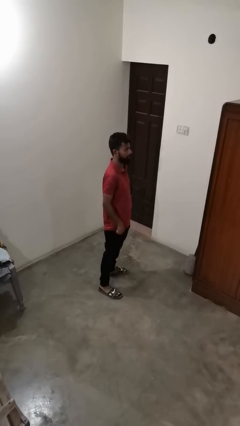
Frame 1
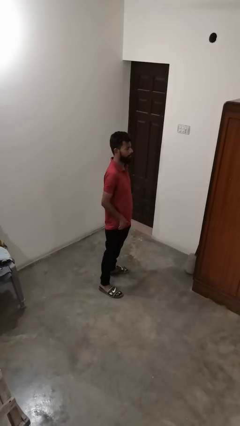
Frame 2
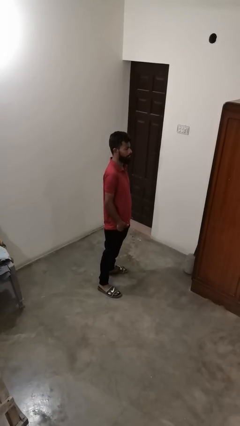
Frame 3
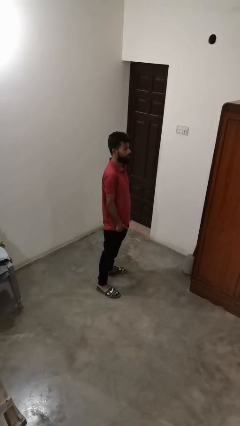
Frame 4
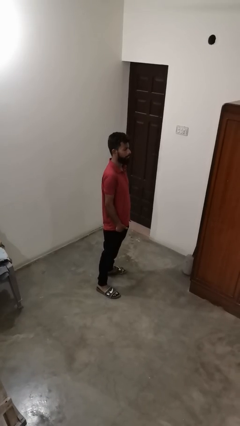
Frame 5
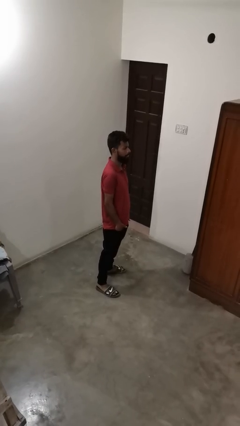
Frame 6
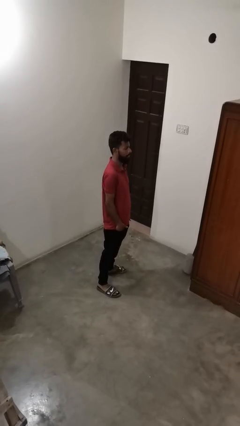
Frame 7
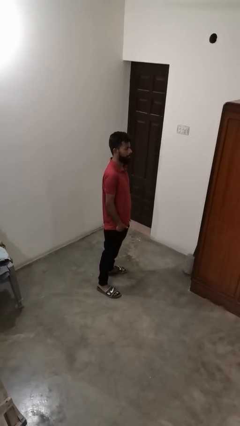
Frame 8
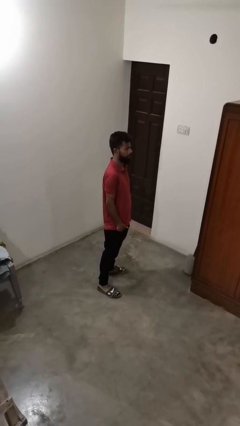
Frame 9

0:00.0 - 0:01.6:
person puts hands in back pockets

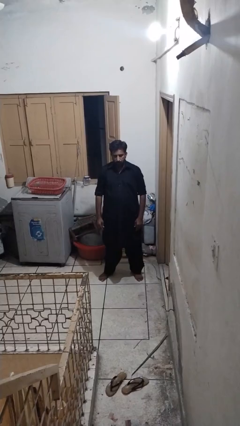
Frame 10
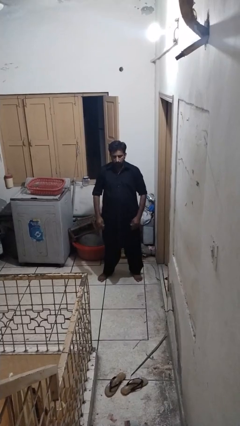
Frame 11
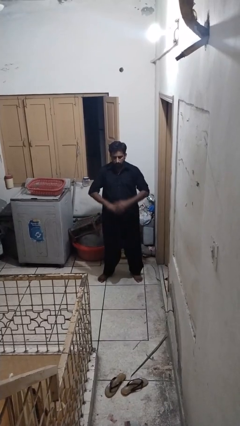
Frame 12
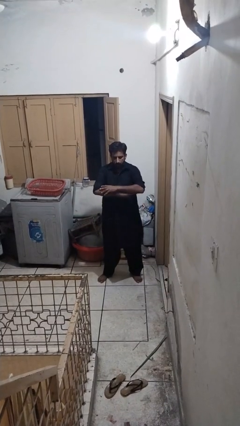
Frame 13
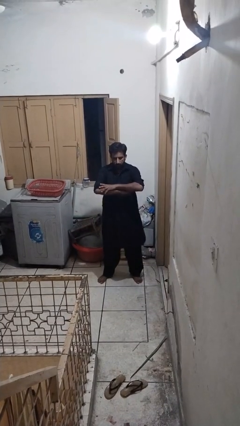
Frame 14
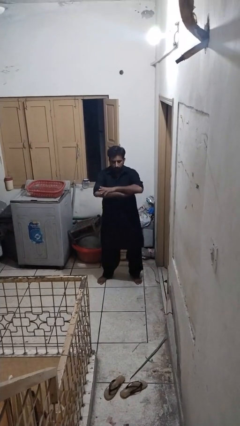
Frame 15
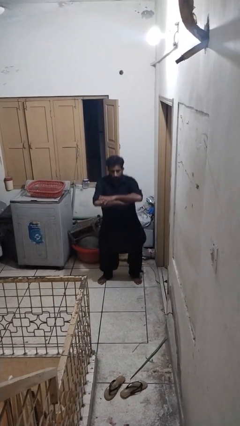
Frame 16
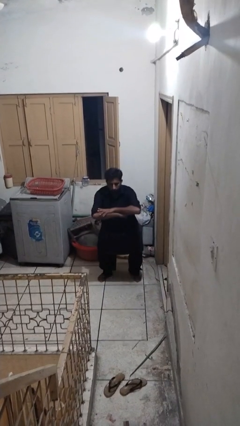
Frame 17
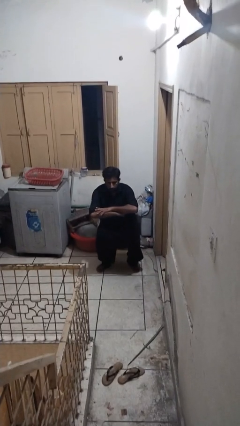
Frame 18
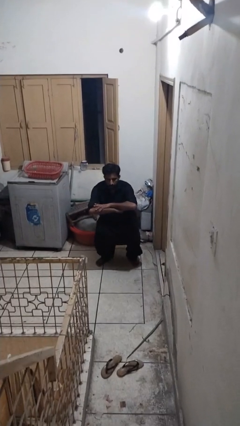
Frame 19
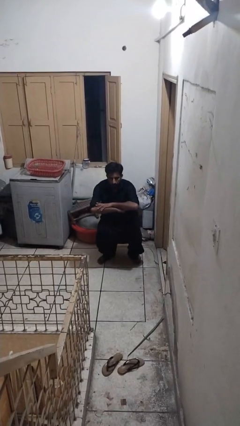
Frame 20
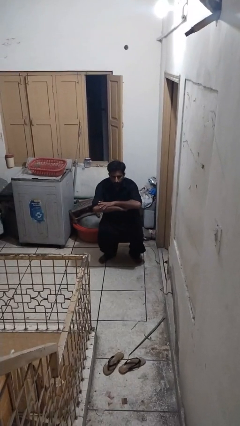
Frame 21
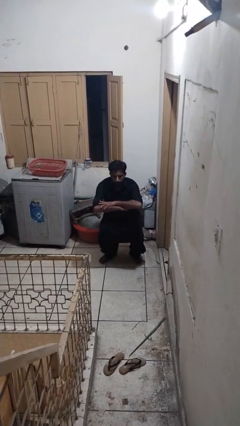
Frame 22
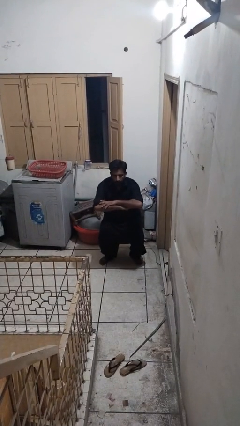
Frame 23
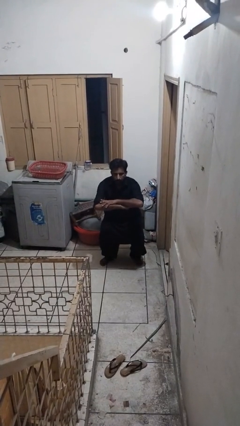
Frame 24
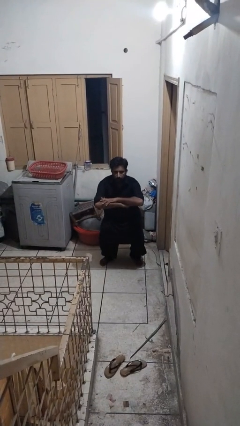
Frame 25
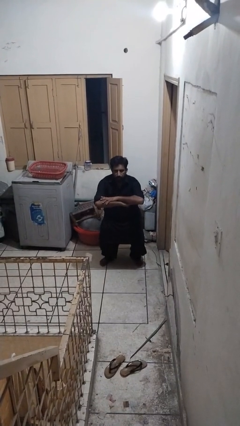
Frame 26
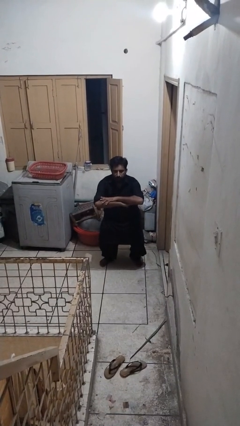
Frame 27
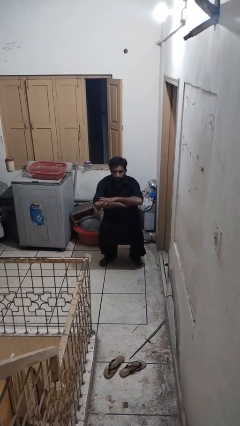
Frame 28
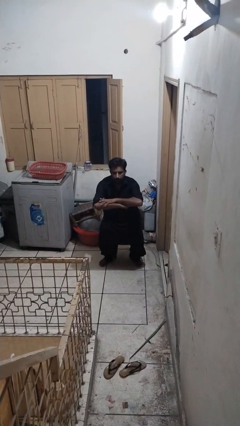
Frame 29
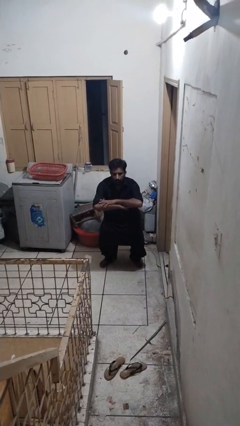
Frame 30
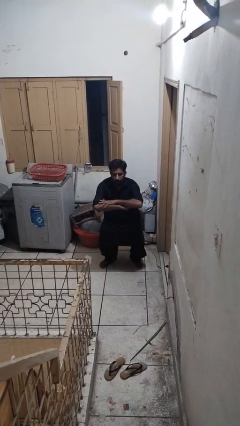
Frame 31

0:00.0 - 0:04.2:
person squats

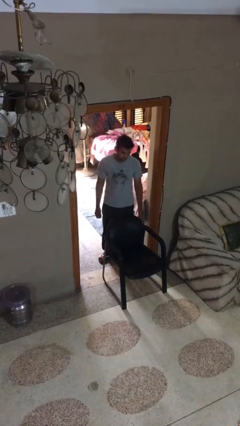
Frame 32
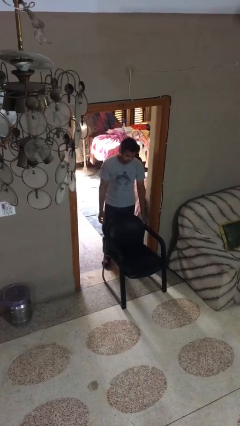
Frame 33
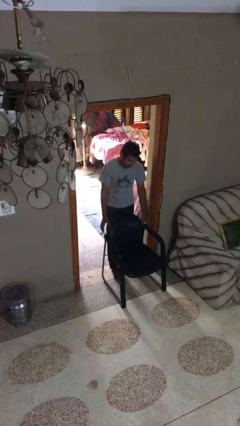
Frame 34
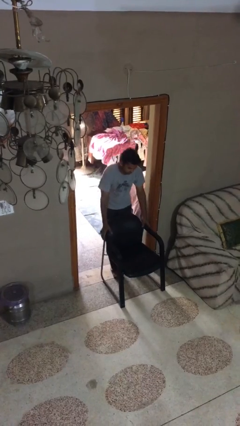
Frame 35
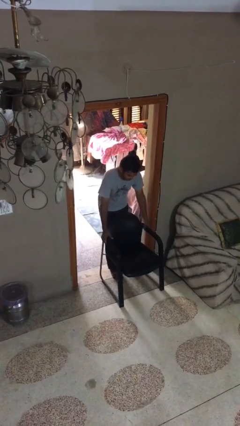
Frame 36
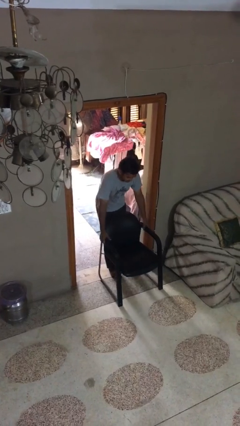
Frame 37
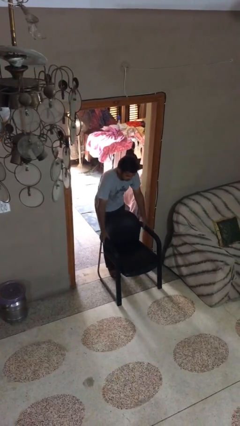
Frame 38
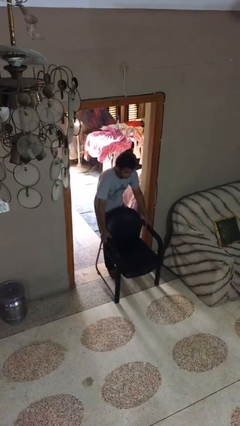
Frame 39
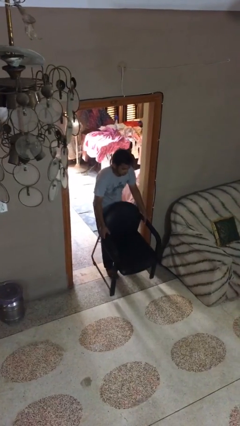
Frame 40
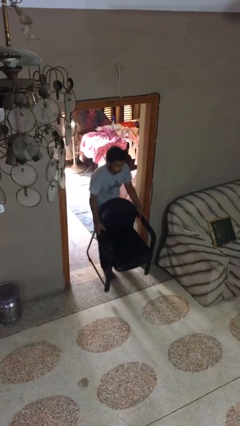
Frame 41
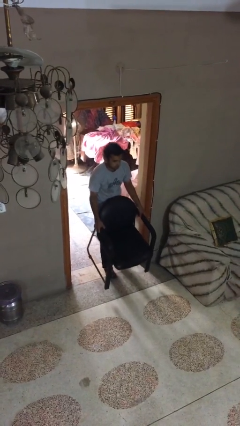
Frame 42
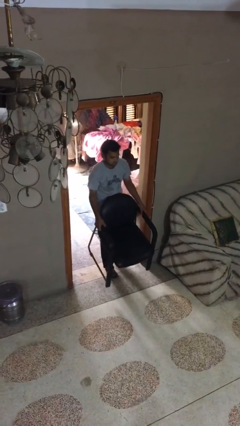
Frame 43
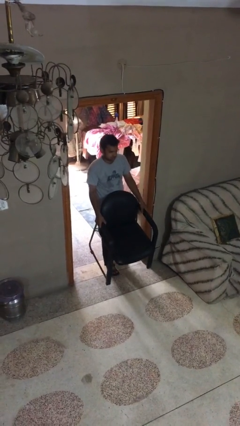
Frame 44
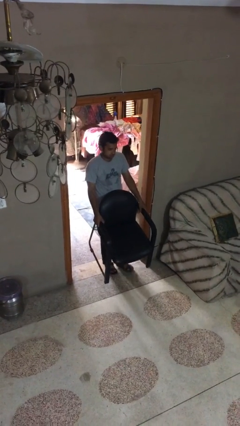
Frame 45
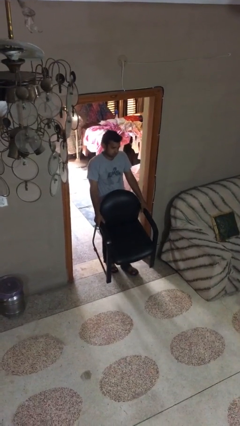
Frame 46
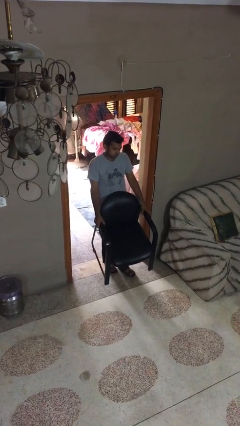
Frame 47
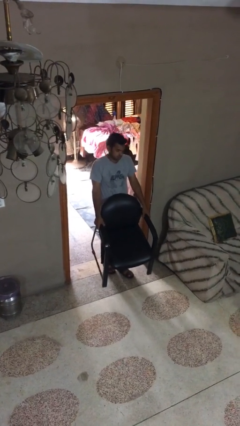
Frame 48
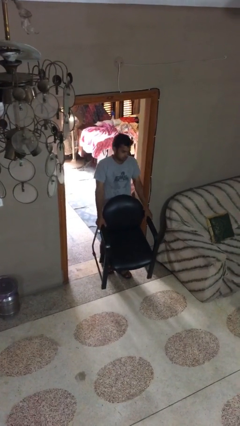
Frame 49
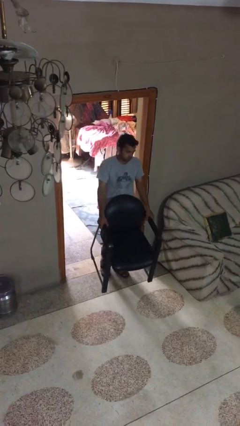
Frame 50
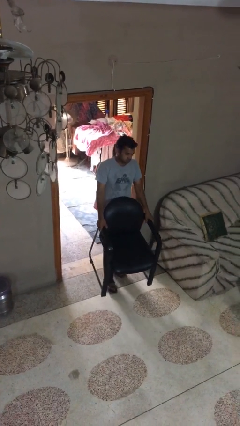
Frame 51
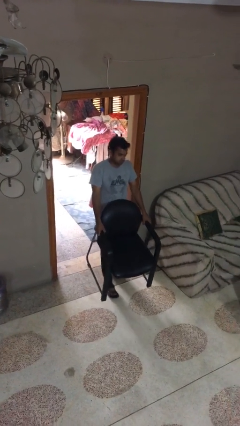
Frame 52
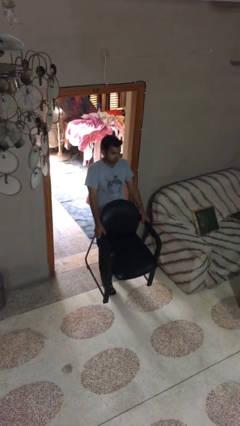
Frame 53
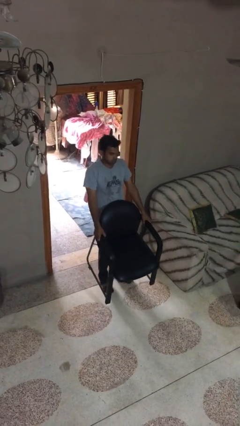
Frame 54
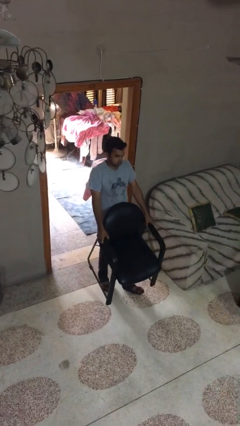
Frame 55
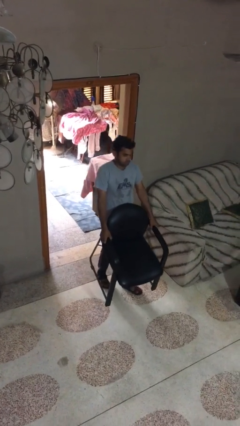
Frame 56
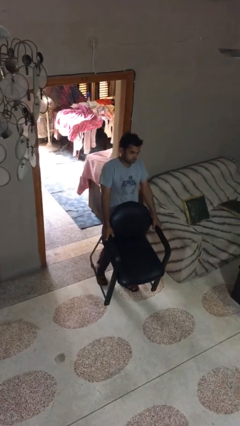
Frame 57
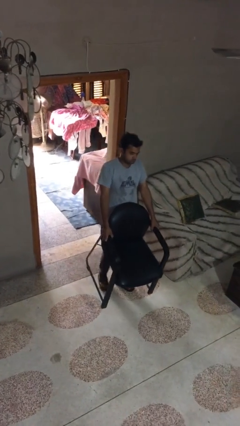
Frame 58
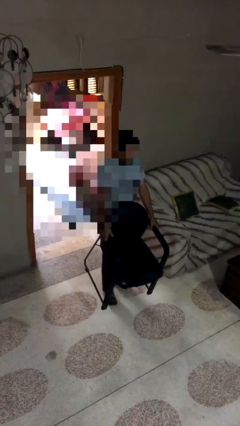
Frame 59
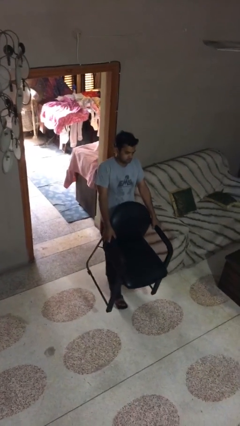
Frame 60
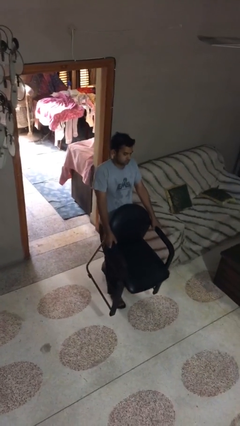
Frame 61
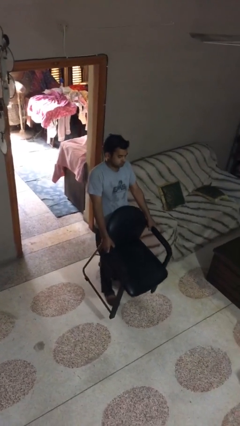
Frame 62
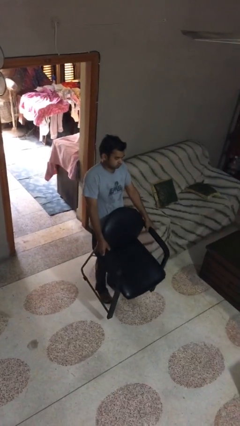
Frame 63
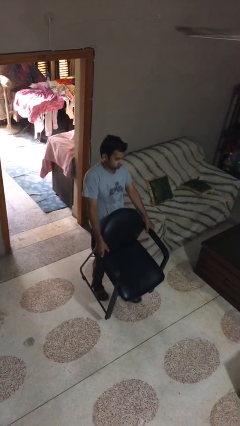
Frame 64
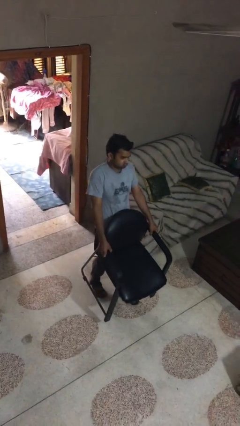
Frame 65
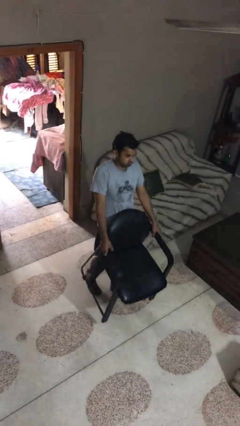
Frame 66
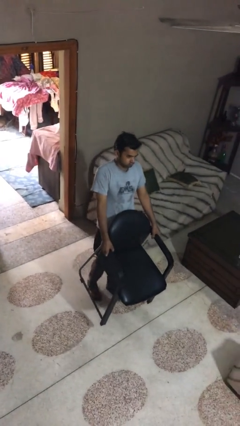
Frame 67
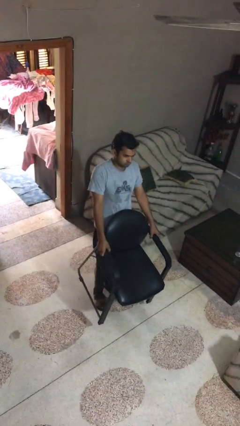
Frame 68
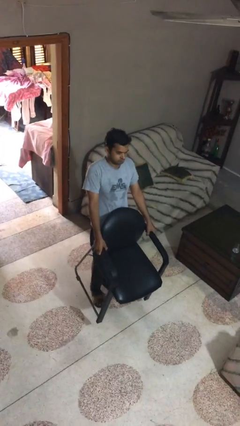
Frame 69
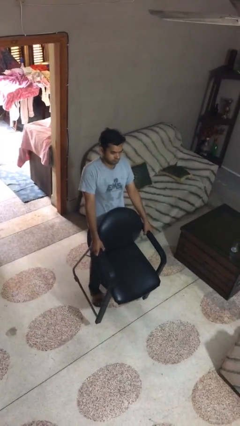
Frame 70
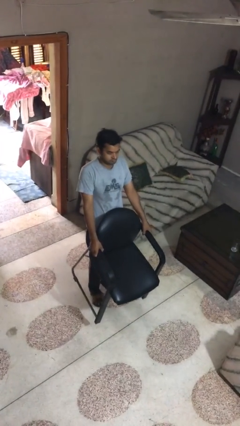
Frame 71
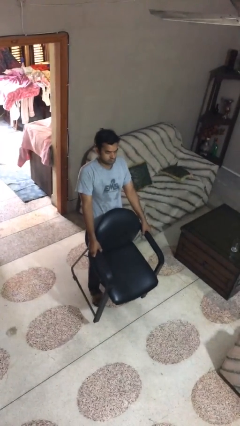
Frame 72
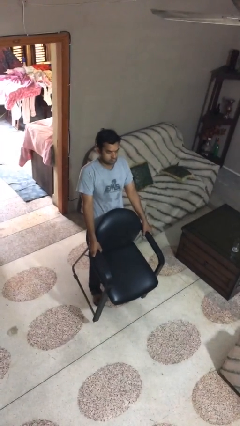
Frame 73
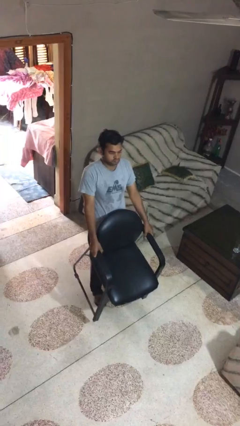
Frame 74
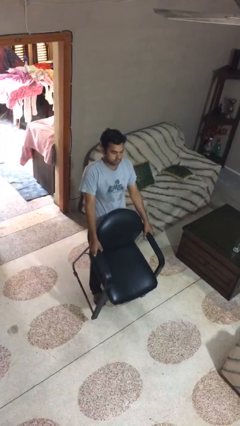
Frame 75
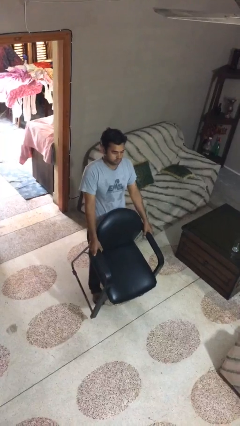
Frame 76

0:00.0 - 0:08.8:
person carries heavy object

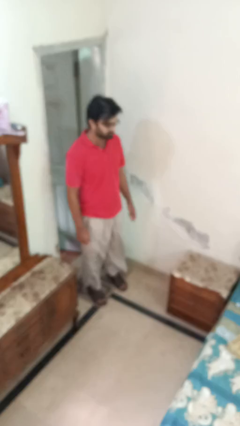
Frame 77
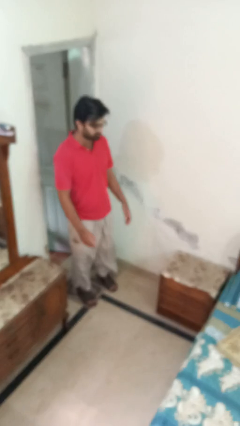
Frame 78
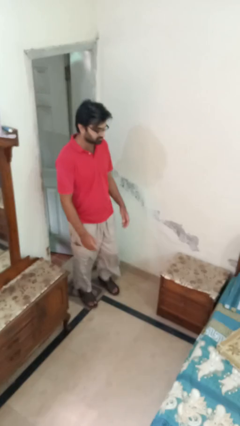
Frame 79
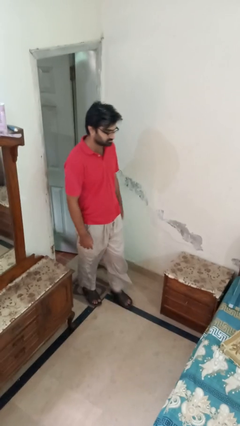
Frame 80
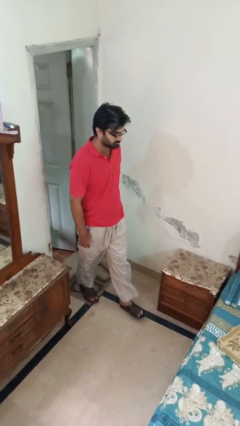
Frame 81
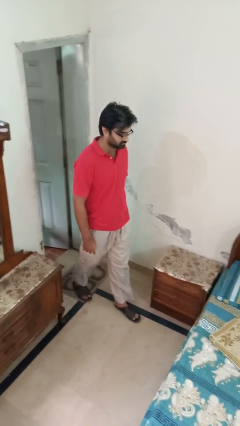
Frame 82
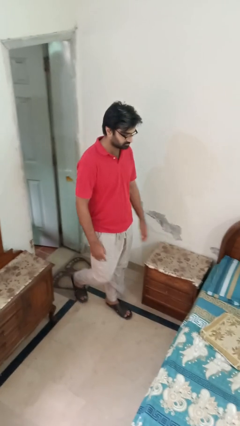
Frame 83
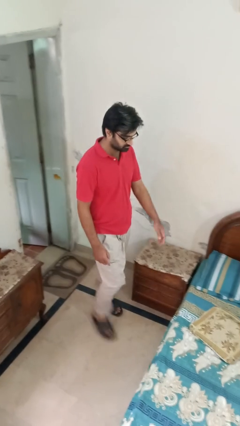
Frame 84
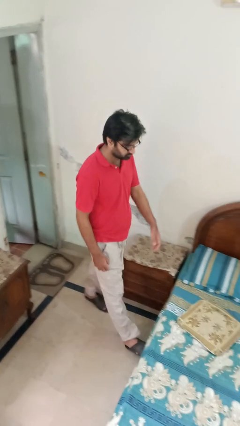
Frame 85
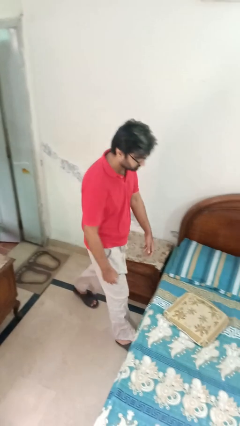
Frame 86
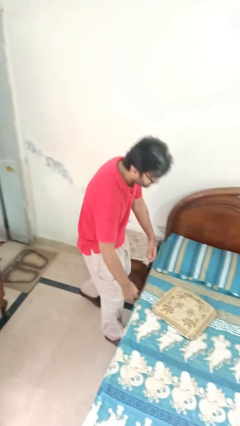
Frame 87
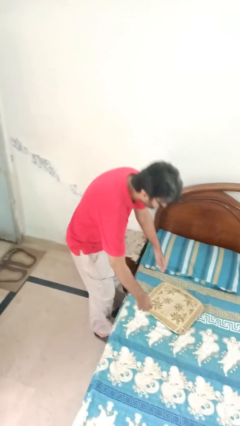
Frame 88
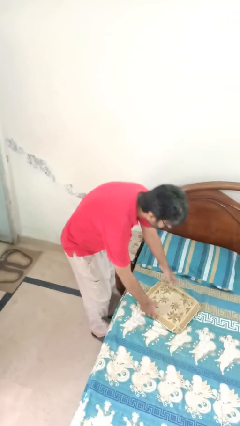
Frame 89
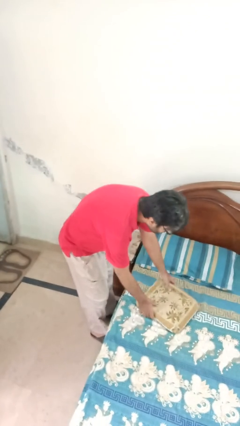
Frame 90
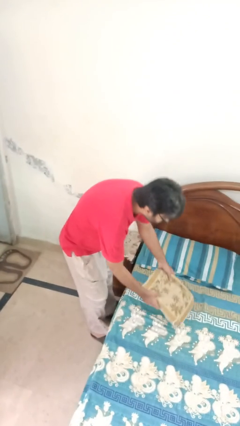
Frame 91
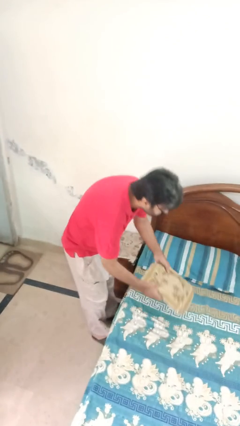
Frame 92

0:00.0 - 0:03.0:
person picks up object from bed
